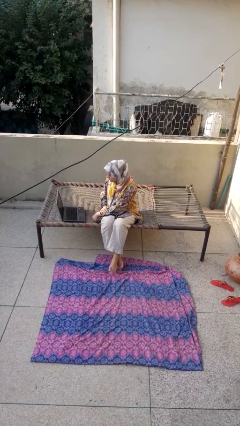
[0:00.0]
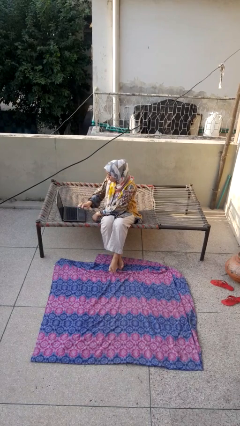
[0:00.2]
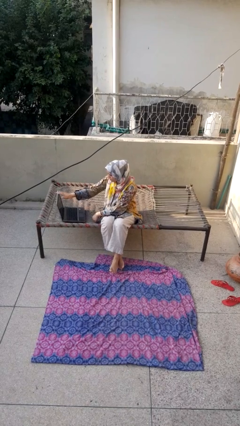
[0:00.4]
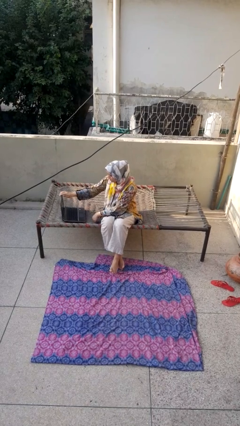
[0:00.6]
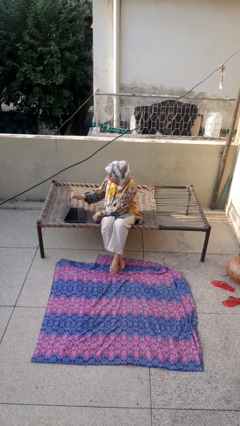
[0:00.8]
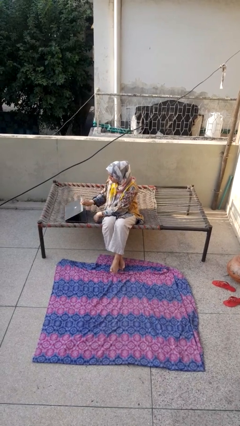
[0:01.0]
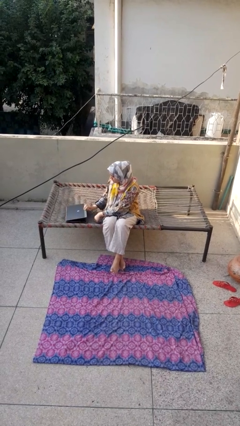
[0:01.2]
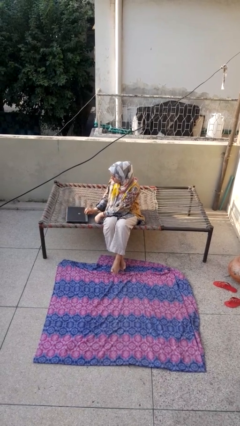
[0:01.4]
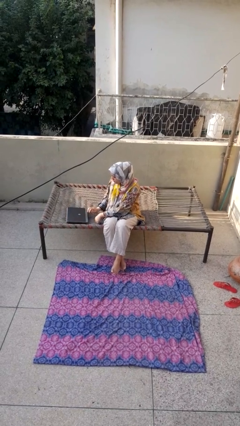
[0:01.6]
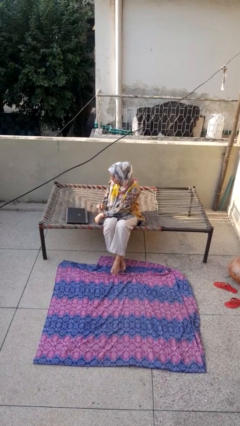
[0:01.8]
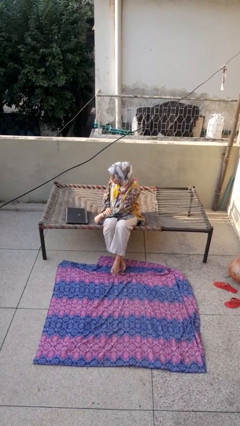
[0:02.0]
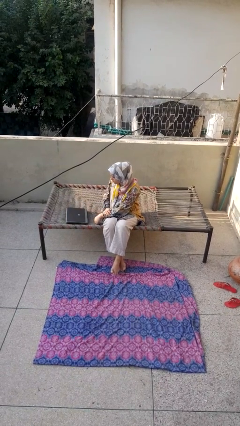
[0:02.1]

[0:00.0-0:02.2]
person closes laptop

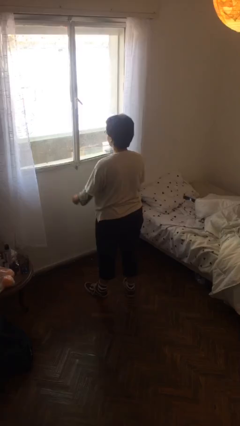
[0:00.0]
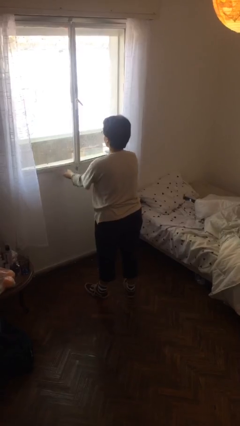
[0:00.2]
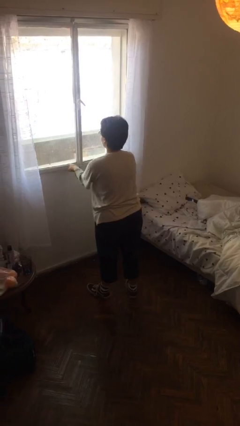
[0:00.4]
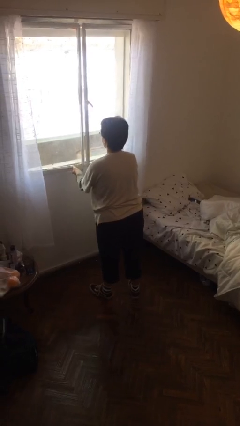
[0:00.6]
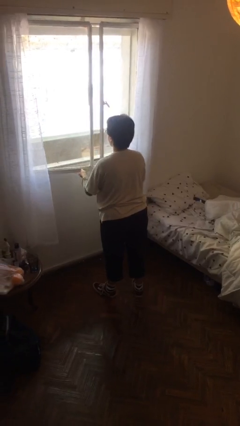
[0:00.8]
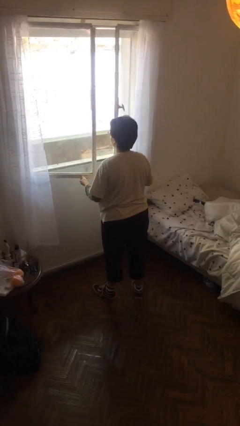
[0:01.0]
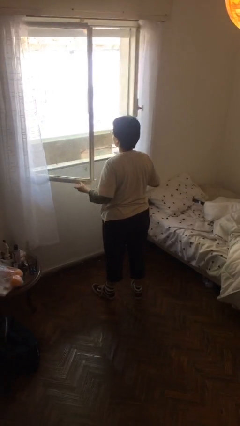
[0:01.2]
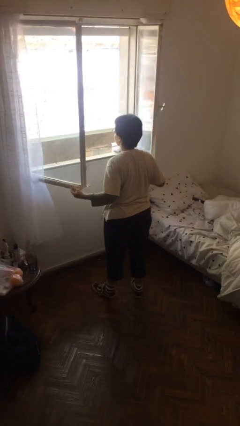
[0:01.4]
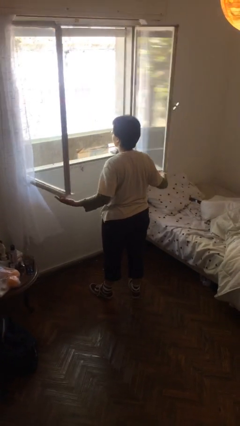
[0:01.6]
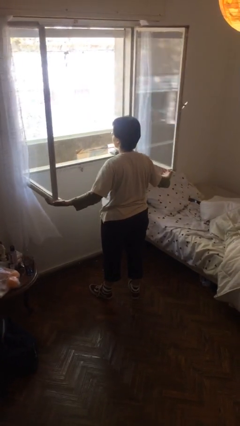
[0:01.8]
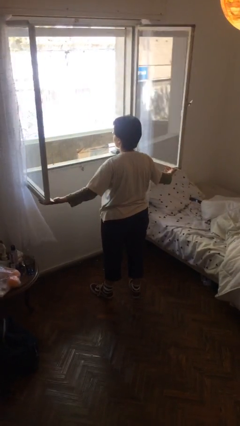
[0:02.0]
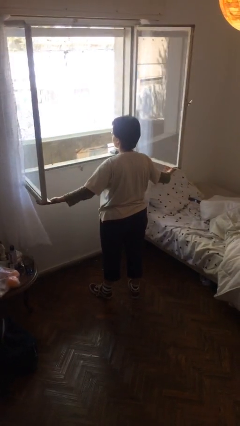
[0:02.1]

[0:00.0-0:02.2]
person opens home window

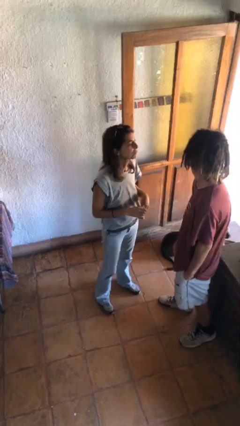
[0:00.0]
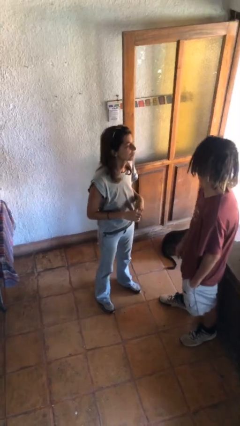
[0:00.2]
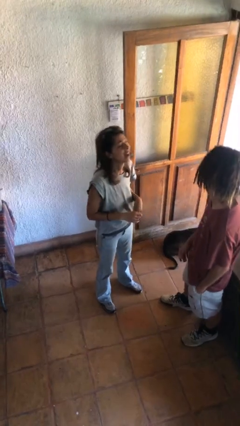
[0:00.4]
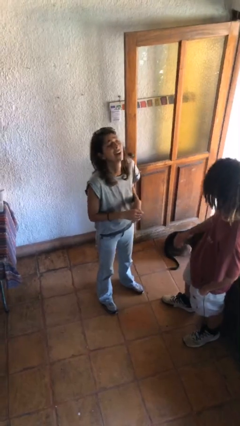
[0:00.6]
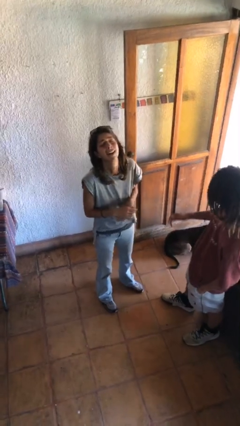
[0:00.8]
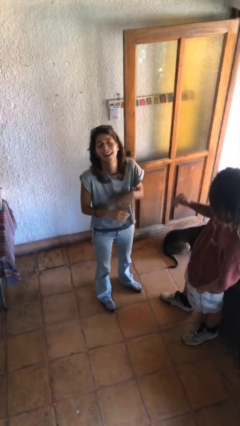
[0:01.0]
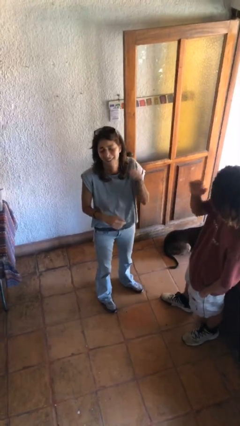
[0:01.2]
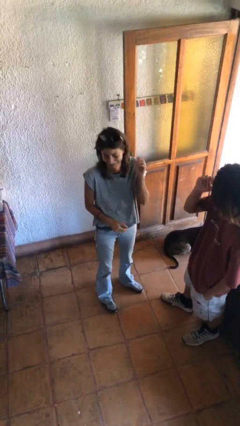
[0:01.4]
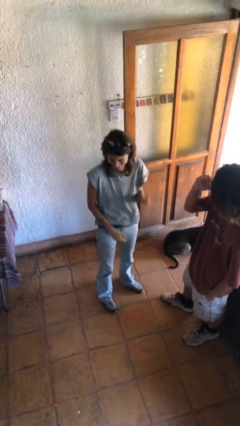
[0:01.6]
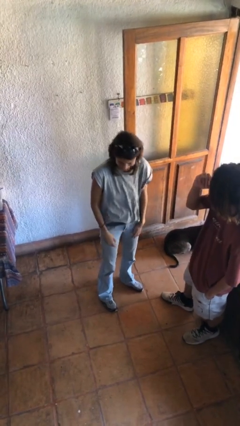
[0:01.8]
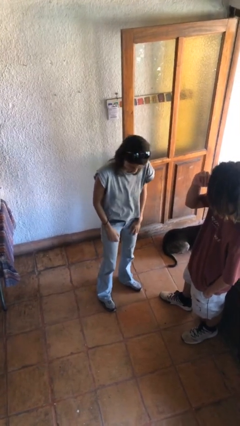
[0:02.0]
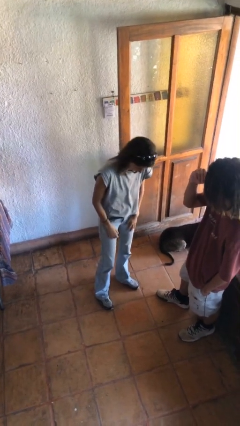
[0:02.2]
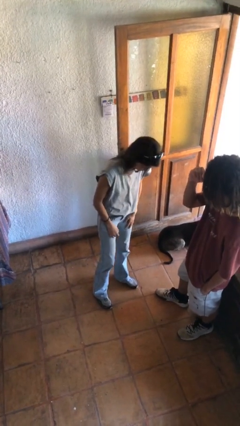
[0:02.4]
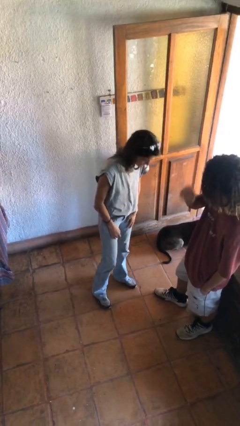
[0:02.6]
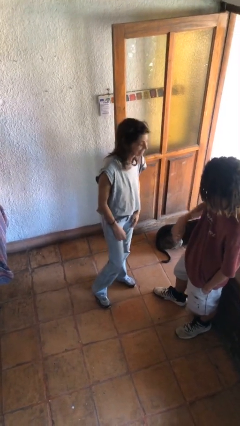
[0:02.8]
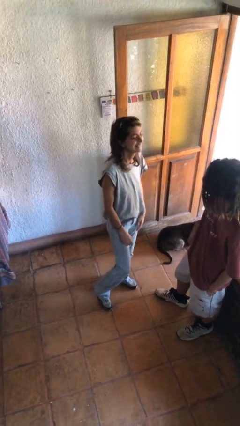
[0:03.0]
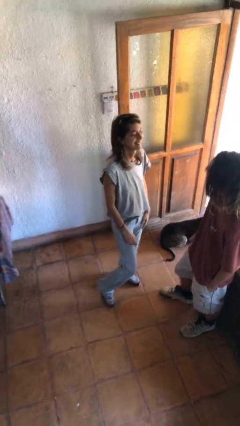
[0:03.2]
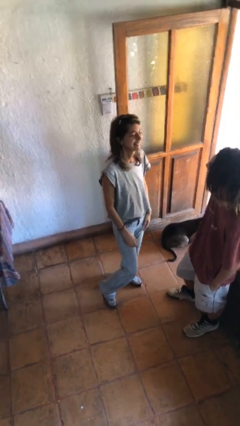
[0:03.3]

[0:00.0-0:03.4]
person laughs with person

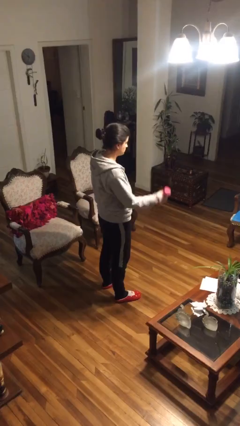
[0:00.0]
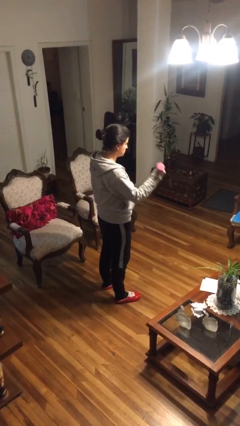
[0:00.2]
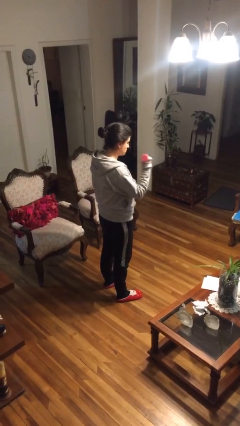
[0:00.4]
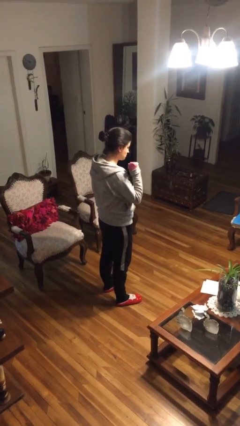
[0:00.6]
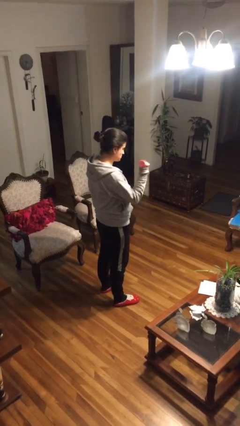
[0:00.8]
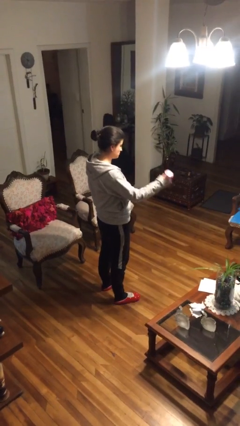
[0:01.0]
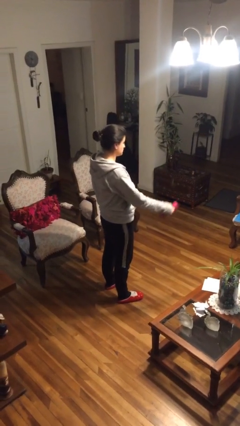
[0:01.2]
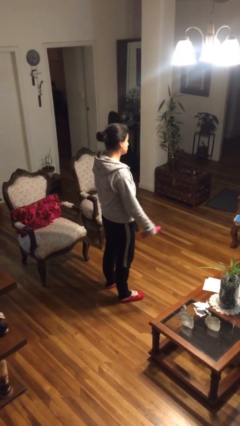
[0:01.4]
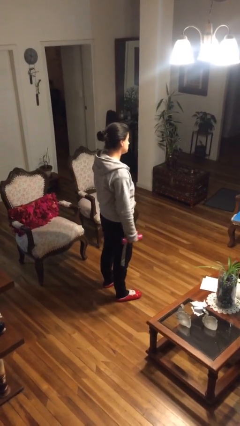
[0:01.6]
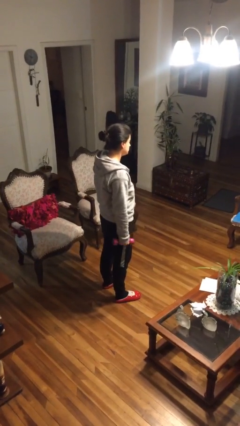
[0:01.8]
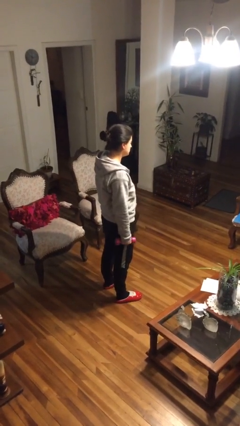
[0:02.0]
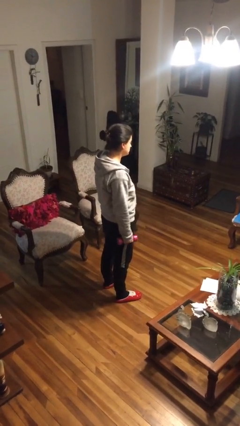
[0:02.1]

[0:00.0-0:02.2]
person lifts dumbbells

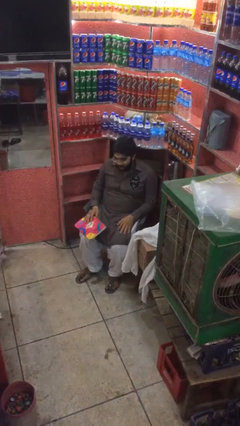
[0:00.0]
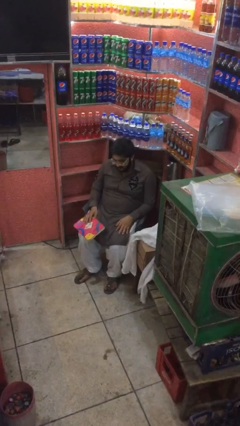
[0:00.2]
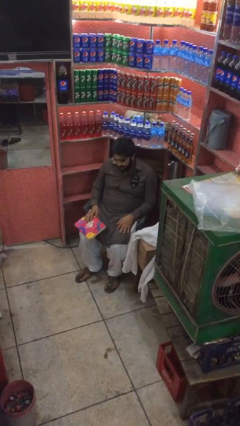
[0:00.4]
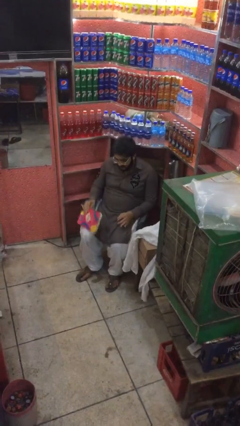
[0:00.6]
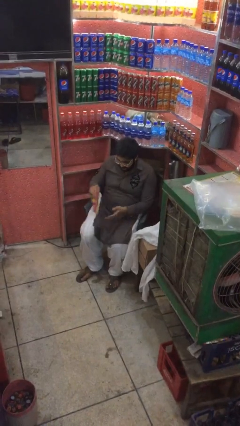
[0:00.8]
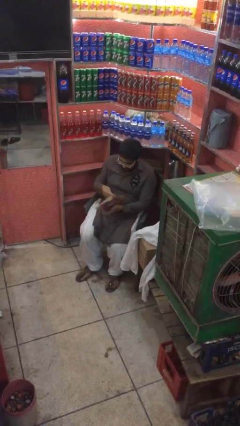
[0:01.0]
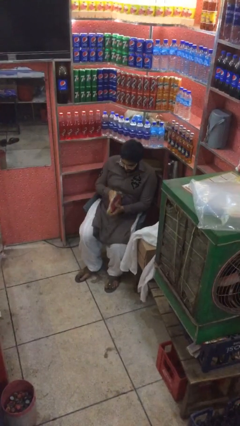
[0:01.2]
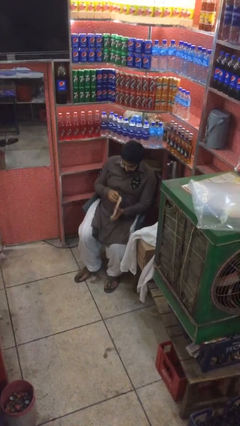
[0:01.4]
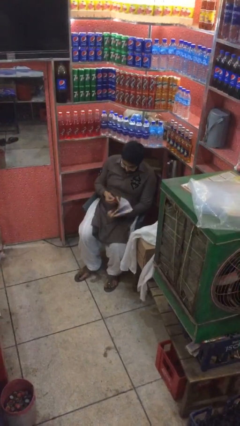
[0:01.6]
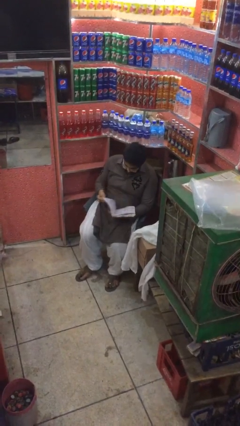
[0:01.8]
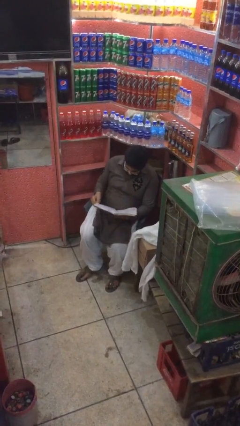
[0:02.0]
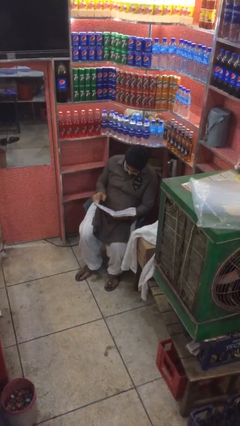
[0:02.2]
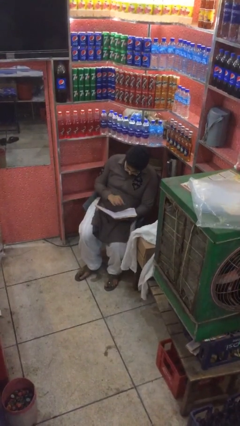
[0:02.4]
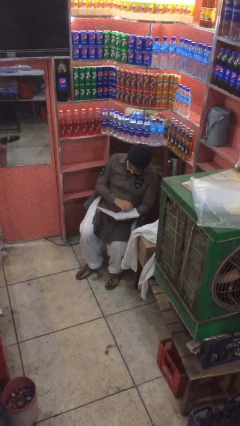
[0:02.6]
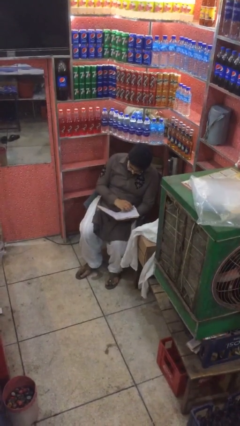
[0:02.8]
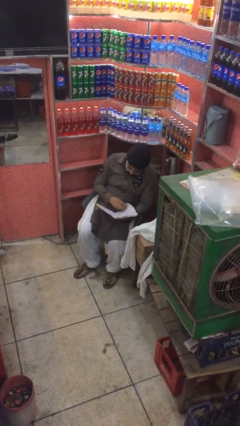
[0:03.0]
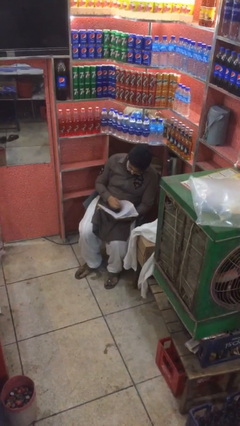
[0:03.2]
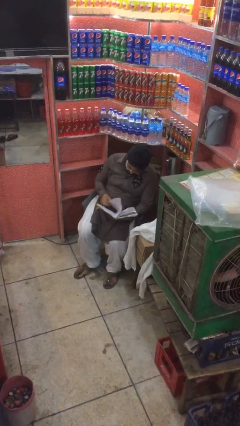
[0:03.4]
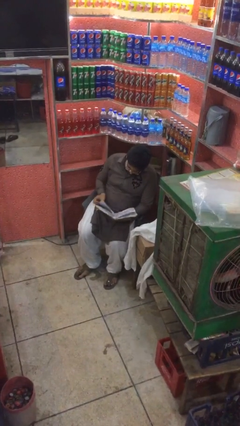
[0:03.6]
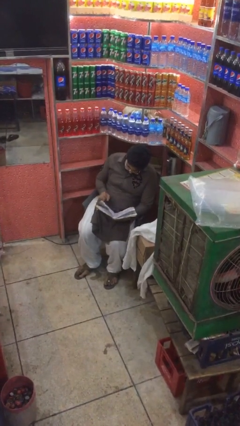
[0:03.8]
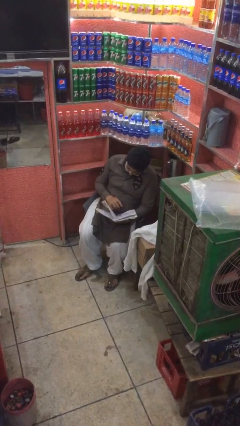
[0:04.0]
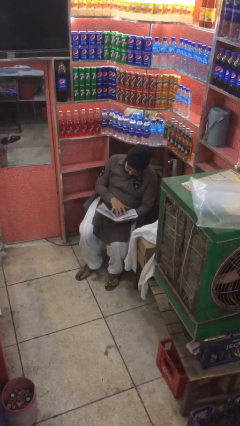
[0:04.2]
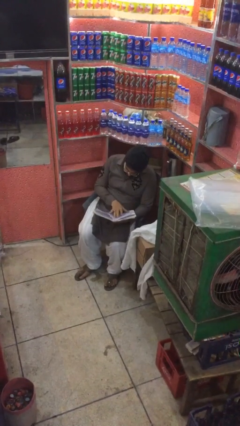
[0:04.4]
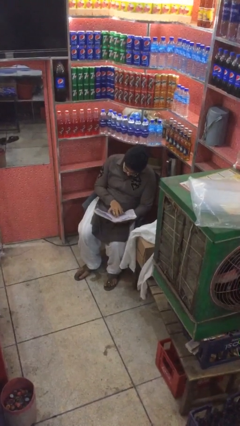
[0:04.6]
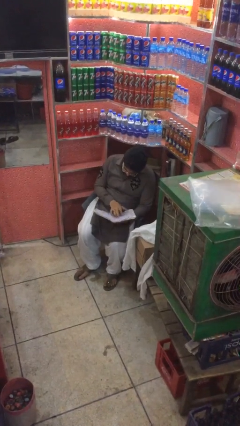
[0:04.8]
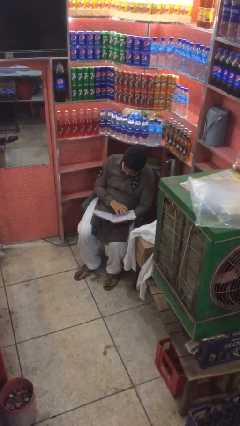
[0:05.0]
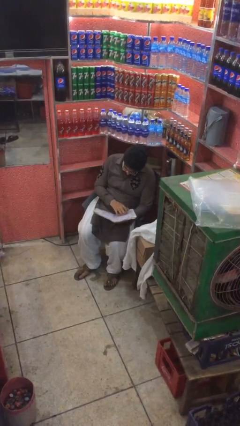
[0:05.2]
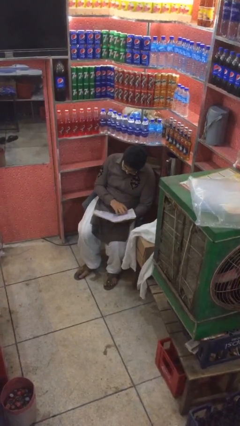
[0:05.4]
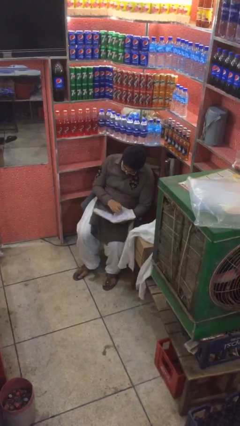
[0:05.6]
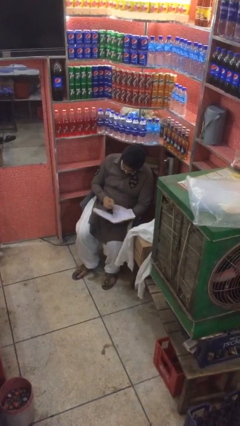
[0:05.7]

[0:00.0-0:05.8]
person reads document

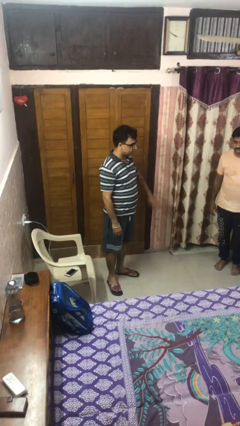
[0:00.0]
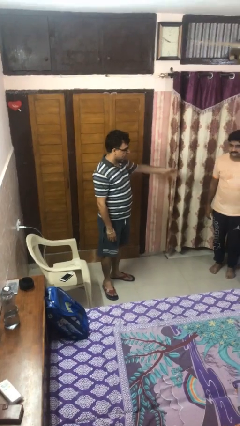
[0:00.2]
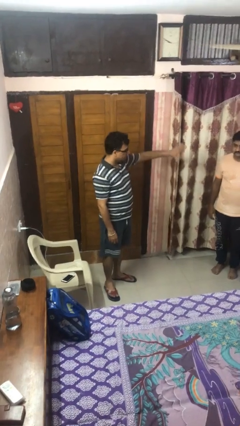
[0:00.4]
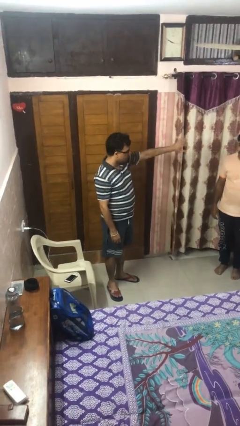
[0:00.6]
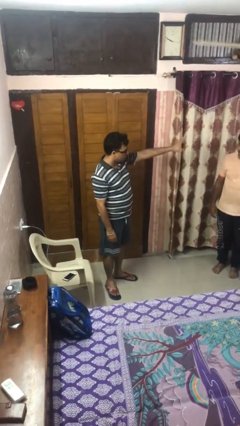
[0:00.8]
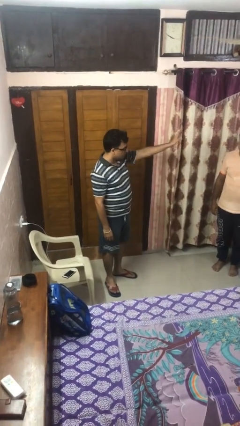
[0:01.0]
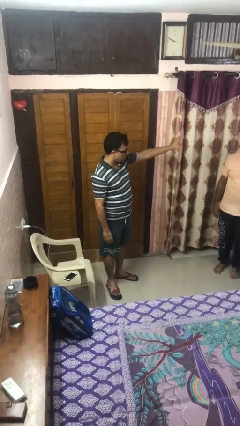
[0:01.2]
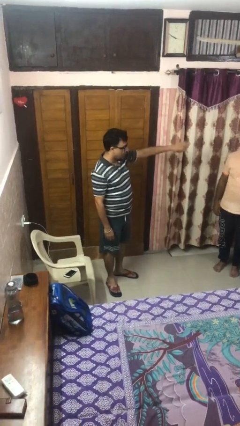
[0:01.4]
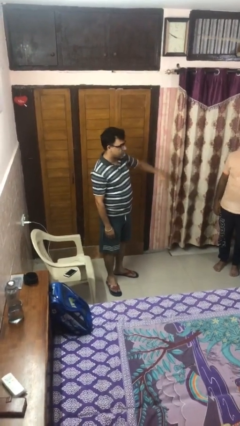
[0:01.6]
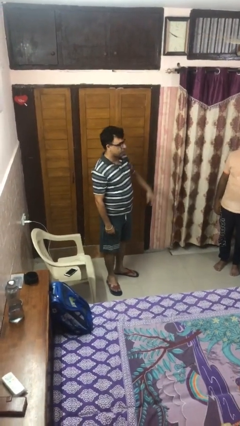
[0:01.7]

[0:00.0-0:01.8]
person waves at person

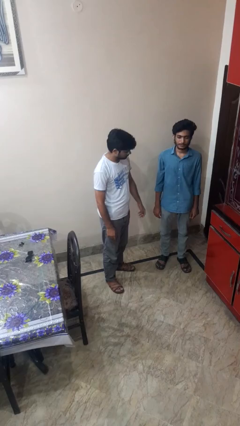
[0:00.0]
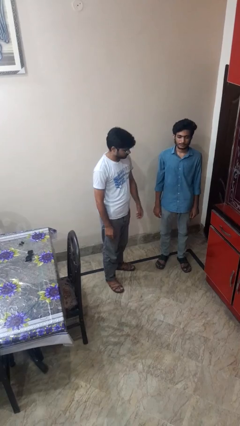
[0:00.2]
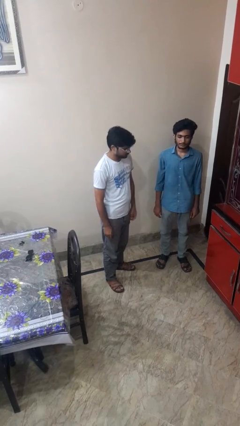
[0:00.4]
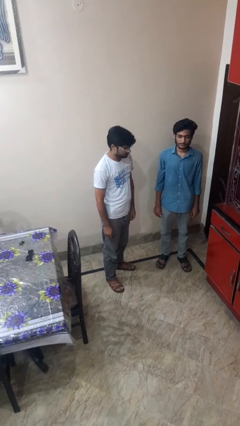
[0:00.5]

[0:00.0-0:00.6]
person takes object from backpack
